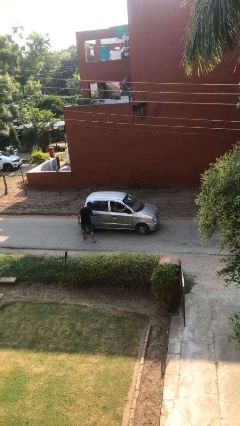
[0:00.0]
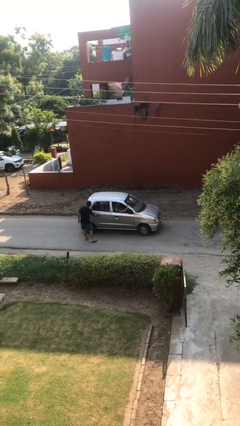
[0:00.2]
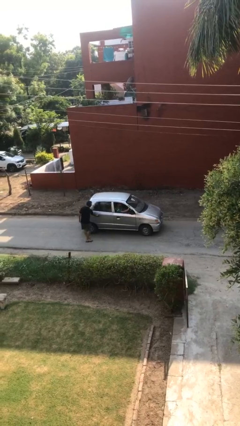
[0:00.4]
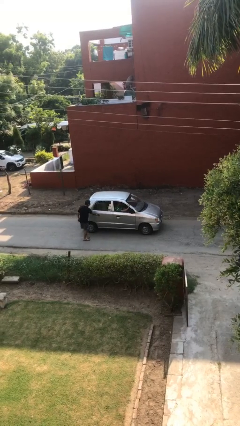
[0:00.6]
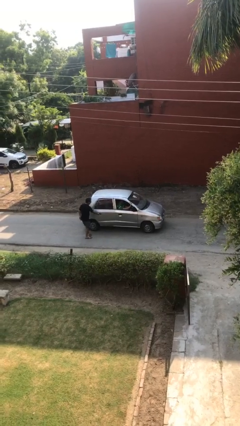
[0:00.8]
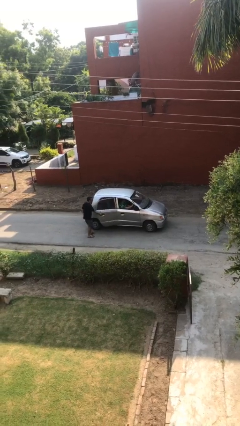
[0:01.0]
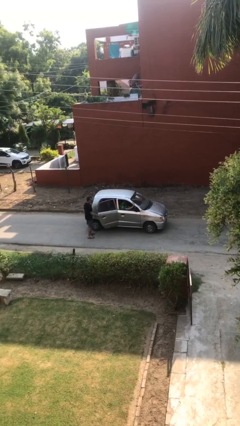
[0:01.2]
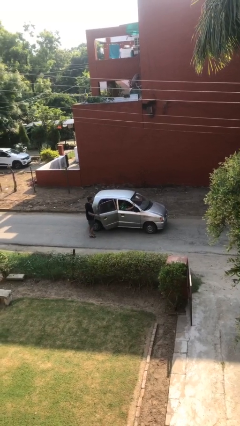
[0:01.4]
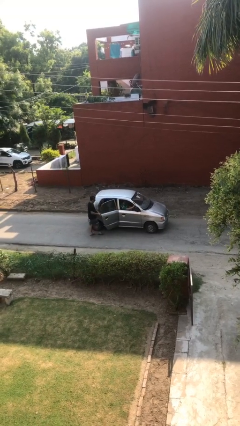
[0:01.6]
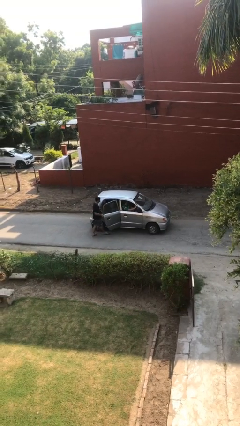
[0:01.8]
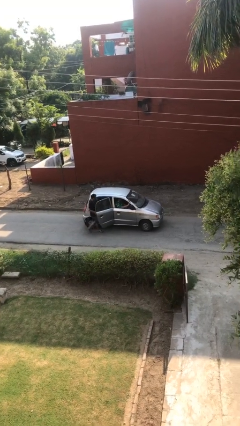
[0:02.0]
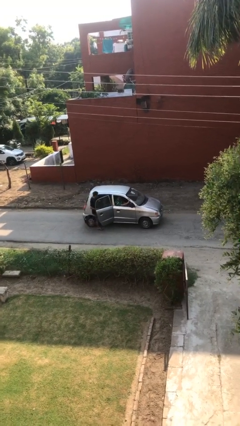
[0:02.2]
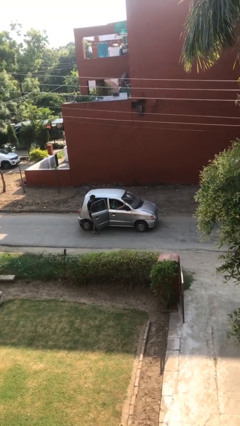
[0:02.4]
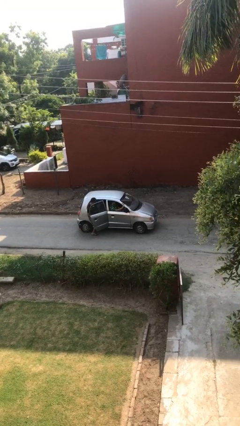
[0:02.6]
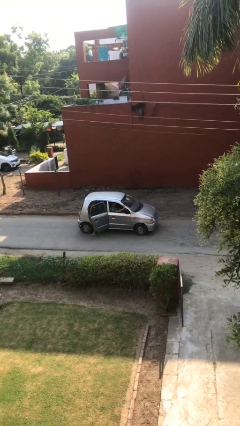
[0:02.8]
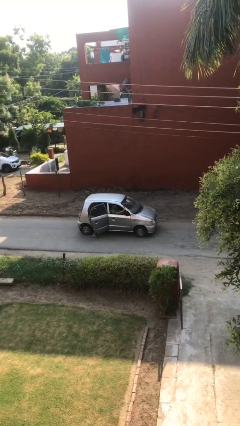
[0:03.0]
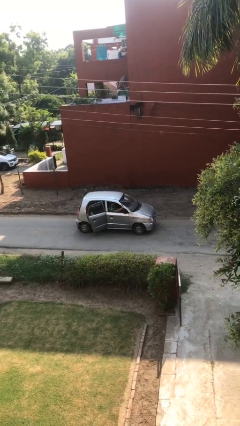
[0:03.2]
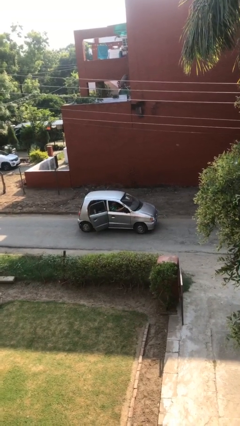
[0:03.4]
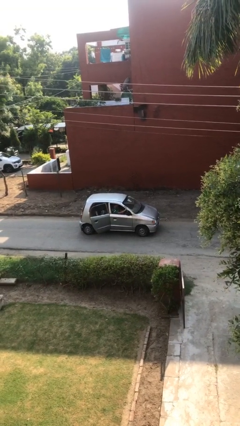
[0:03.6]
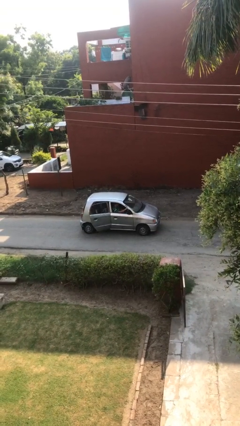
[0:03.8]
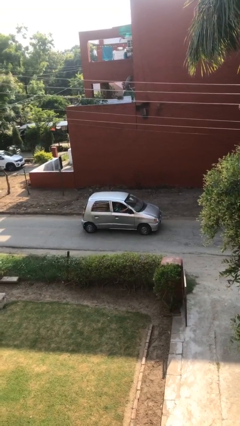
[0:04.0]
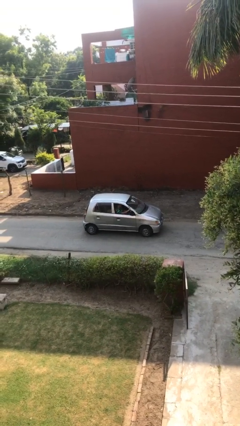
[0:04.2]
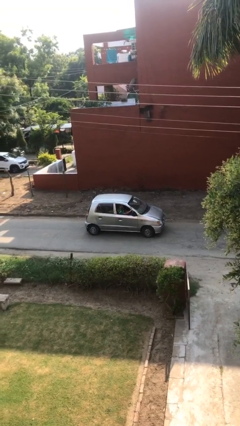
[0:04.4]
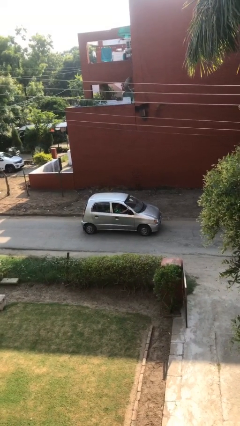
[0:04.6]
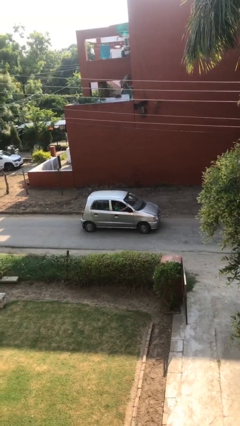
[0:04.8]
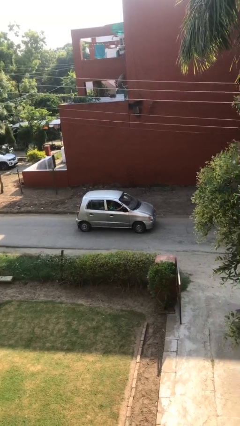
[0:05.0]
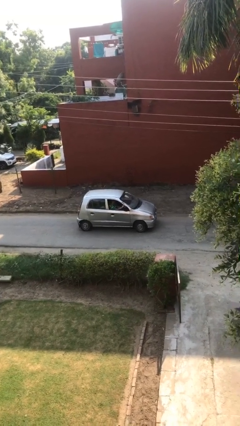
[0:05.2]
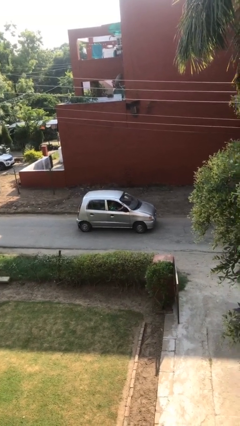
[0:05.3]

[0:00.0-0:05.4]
car picks up person

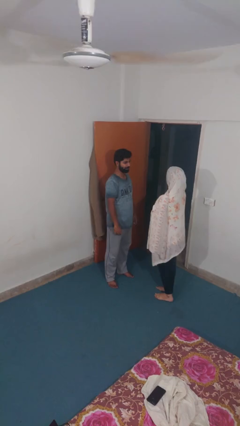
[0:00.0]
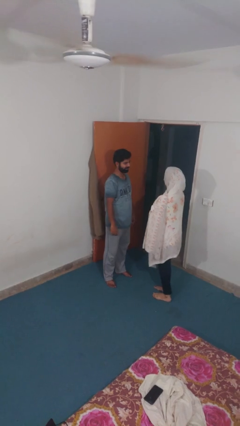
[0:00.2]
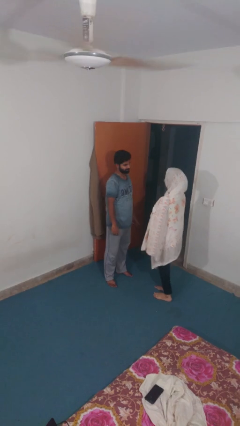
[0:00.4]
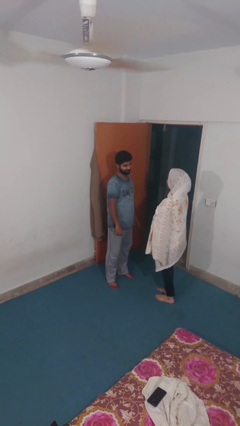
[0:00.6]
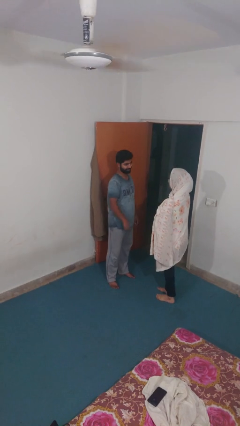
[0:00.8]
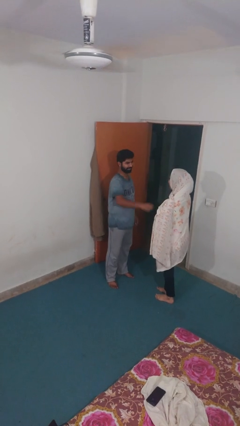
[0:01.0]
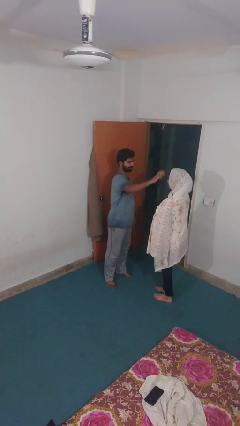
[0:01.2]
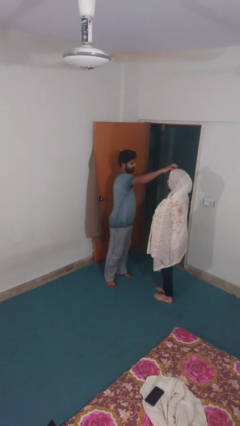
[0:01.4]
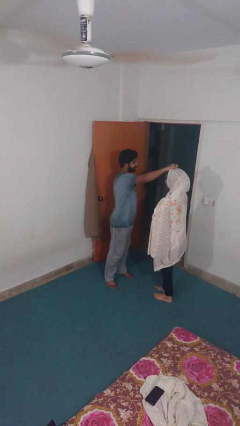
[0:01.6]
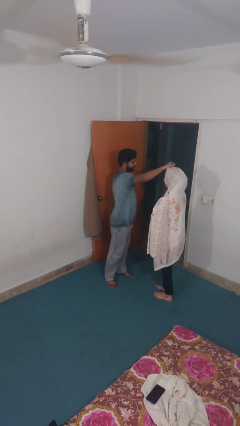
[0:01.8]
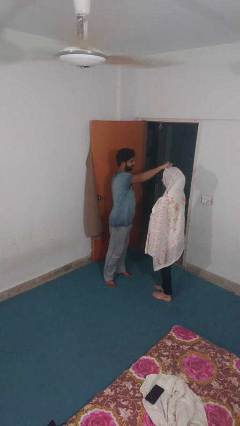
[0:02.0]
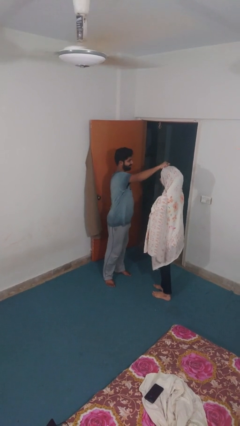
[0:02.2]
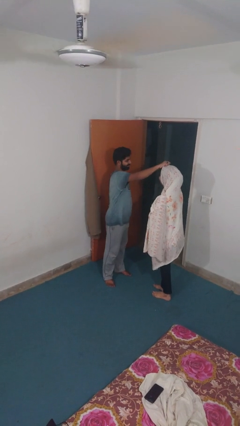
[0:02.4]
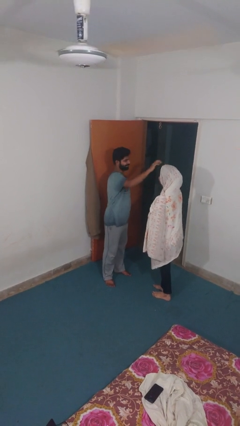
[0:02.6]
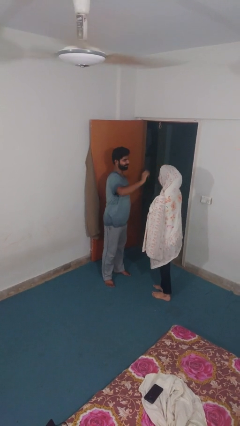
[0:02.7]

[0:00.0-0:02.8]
person grabs person by hair

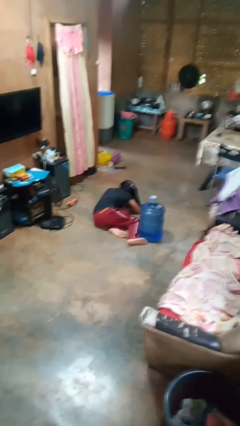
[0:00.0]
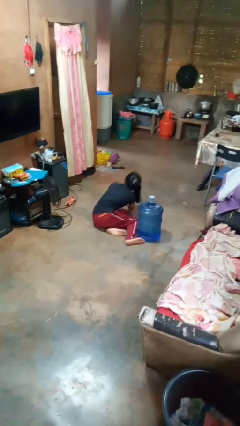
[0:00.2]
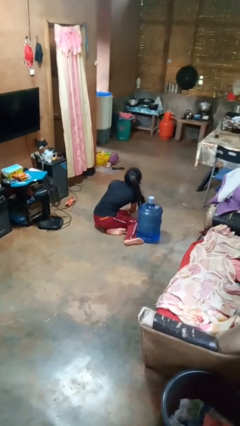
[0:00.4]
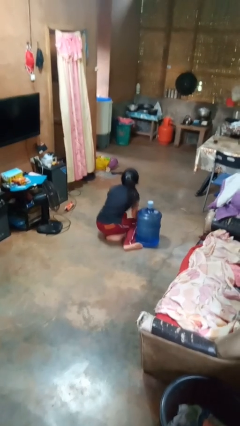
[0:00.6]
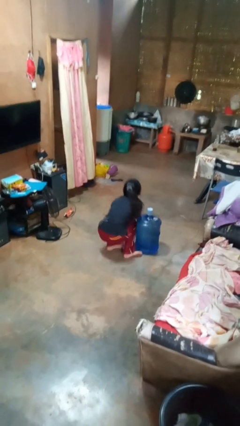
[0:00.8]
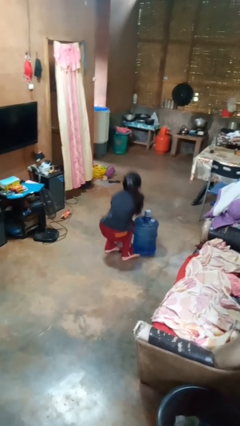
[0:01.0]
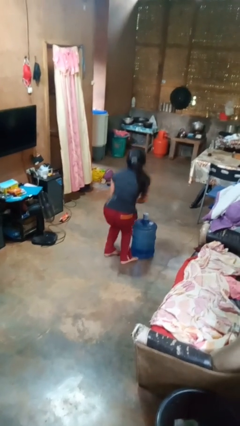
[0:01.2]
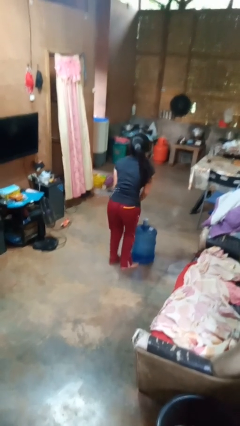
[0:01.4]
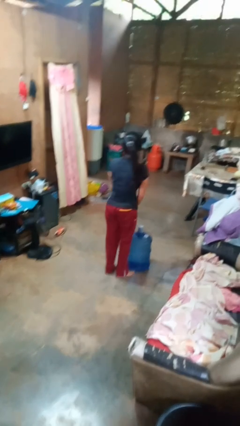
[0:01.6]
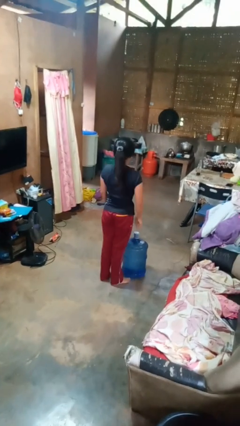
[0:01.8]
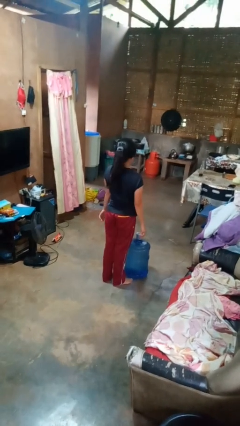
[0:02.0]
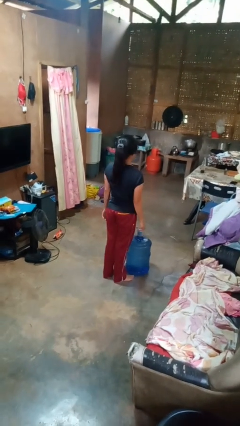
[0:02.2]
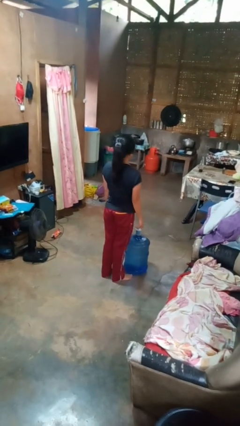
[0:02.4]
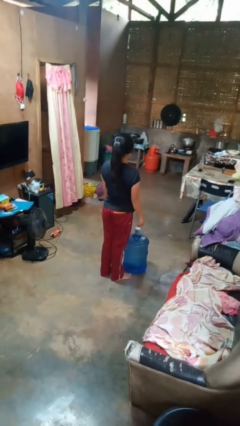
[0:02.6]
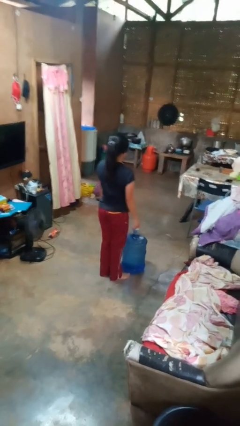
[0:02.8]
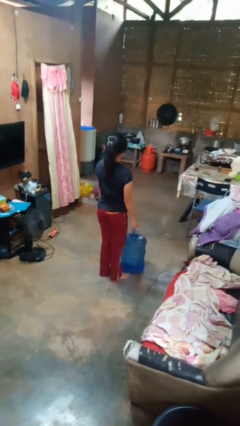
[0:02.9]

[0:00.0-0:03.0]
person stands up from floor

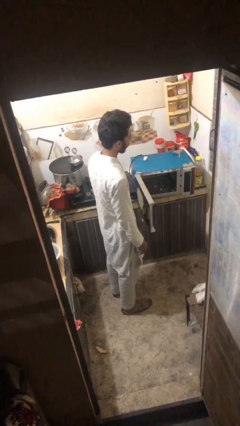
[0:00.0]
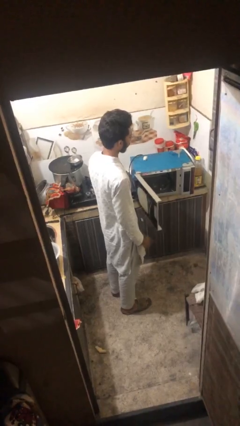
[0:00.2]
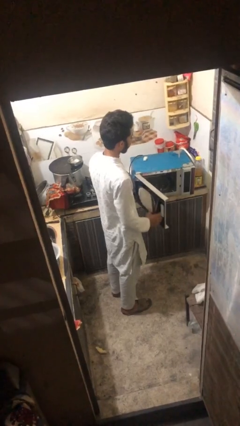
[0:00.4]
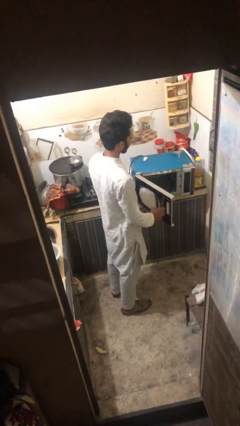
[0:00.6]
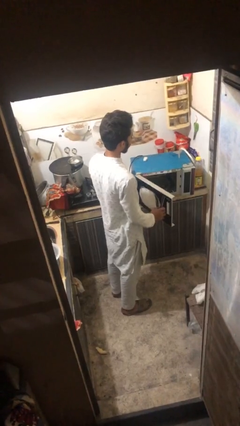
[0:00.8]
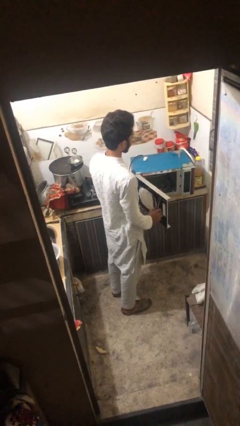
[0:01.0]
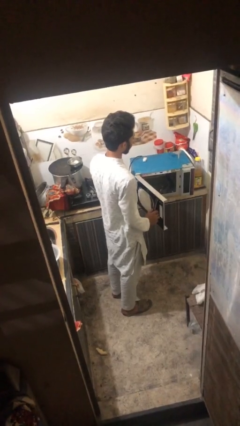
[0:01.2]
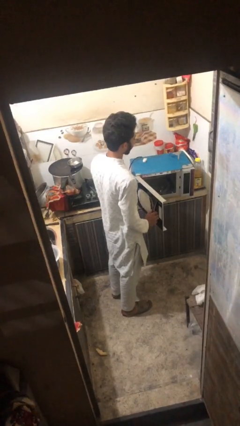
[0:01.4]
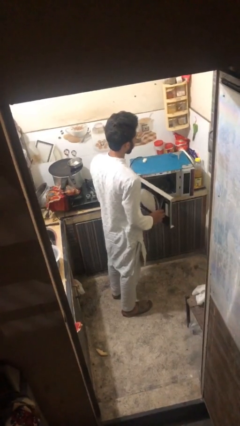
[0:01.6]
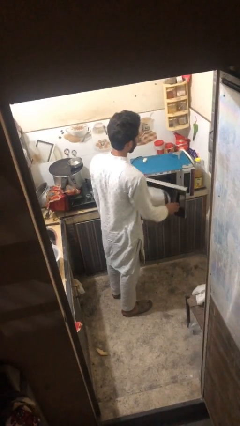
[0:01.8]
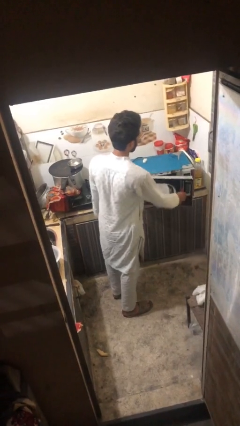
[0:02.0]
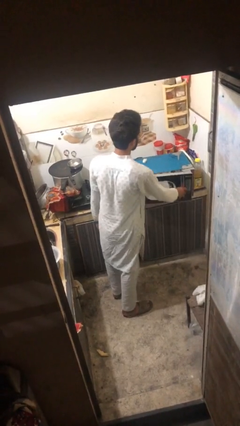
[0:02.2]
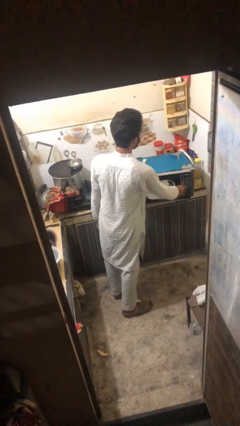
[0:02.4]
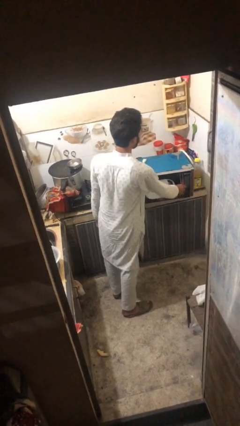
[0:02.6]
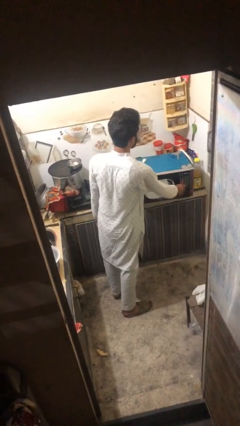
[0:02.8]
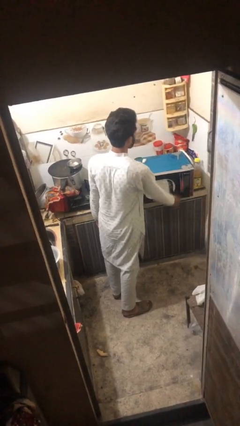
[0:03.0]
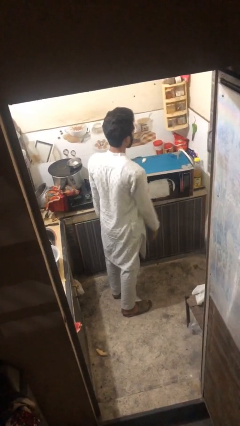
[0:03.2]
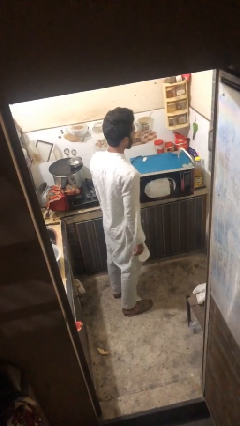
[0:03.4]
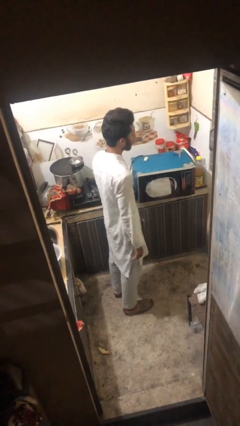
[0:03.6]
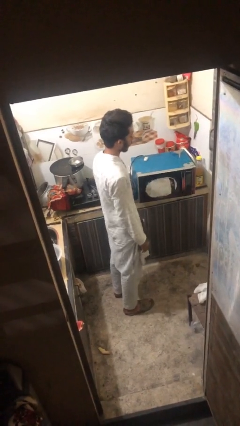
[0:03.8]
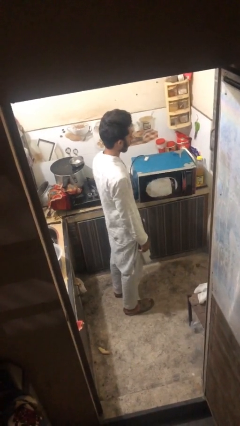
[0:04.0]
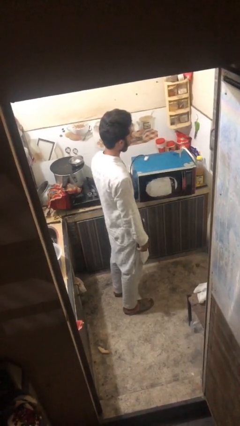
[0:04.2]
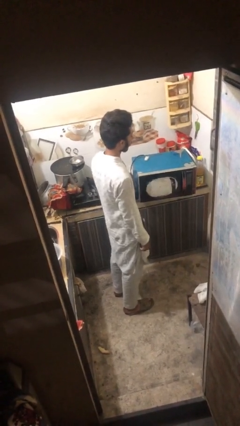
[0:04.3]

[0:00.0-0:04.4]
person closes oven door

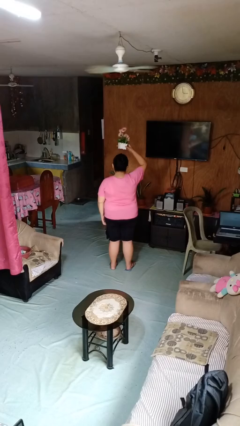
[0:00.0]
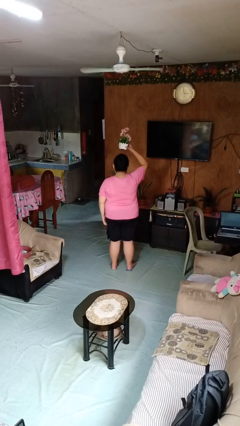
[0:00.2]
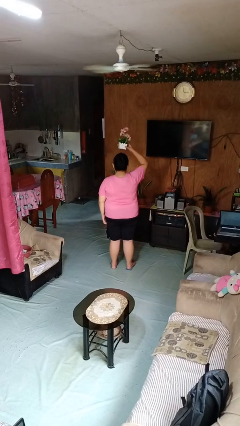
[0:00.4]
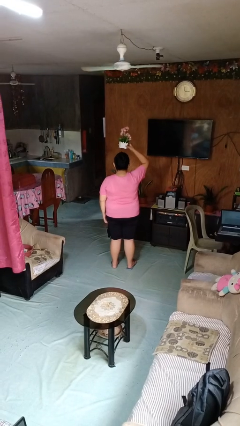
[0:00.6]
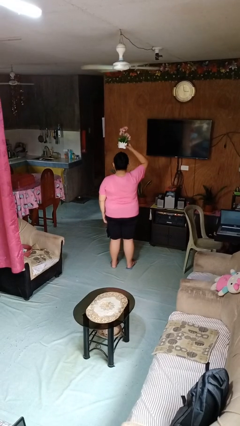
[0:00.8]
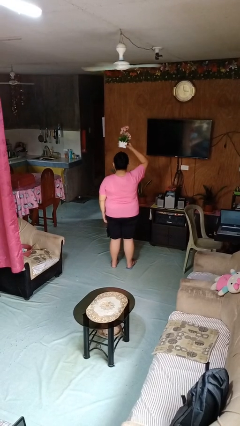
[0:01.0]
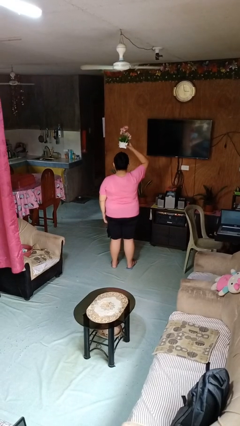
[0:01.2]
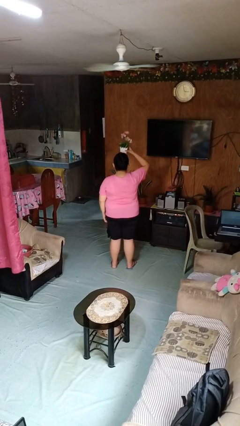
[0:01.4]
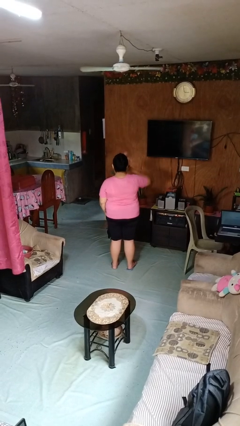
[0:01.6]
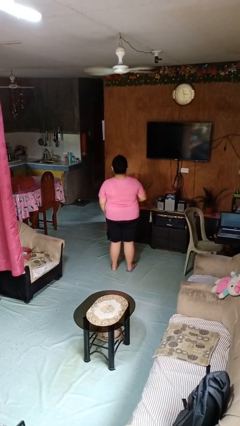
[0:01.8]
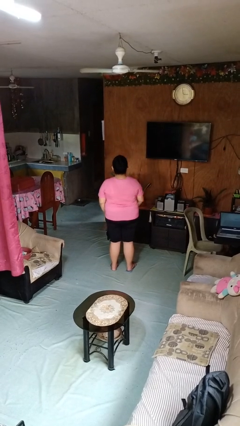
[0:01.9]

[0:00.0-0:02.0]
person holds object above head
